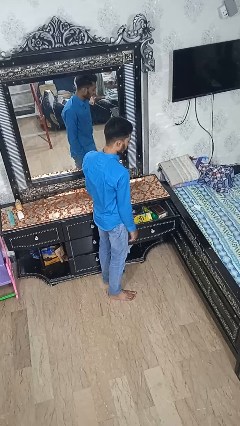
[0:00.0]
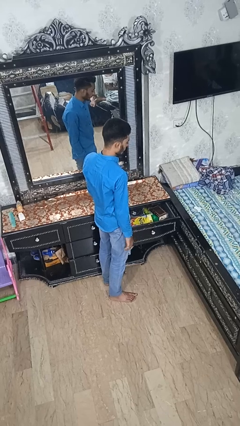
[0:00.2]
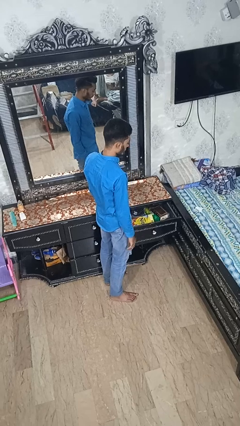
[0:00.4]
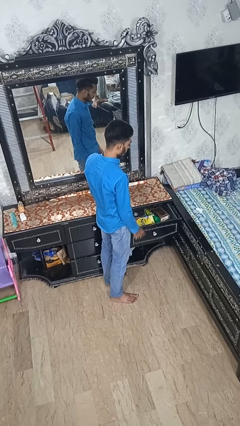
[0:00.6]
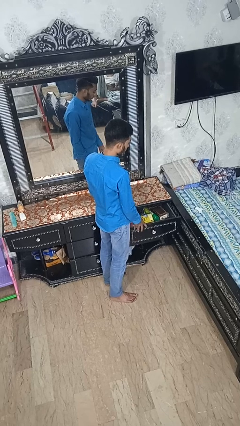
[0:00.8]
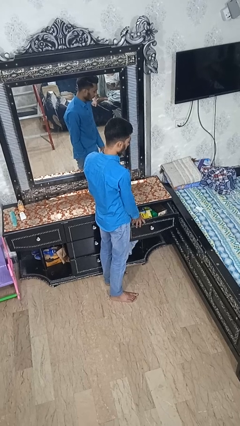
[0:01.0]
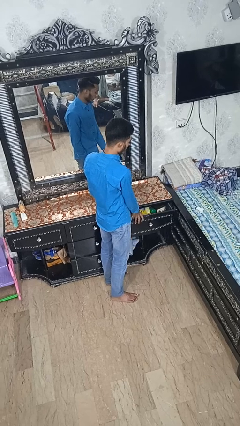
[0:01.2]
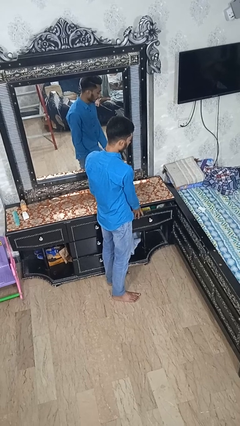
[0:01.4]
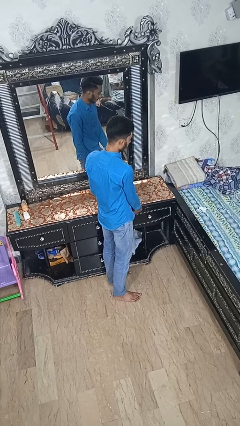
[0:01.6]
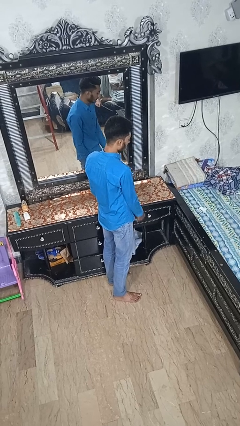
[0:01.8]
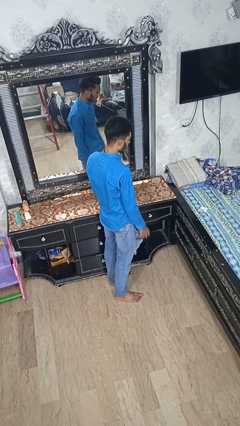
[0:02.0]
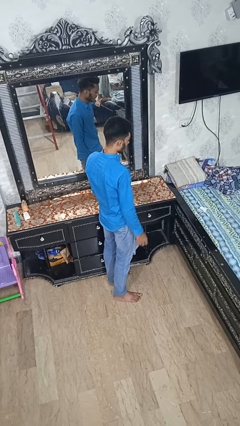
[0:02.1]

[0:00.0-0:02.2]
person closes dresser drawer

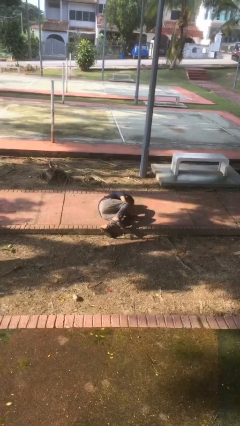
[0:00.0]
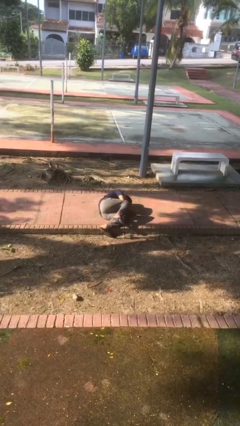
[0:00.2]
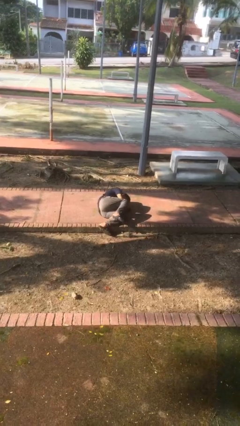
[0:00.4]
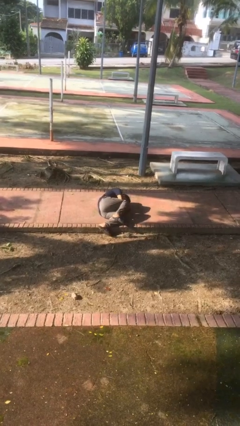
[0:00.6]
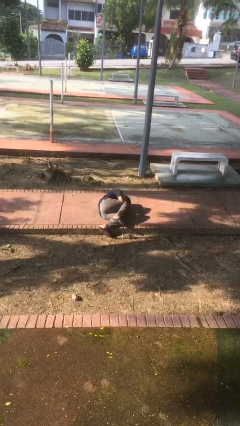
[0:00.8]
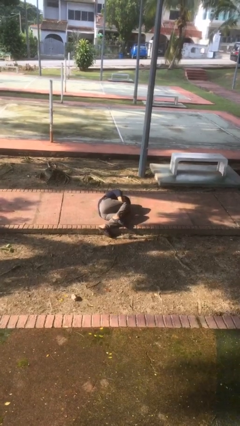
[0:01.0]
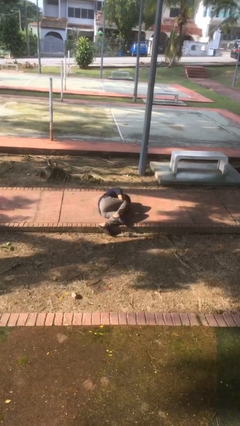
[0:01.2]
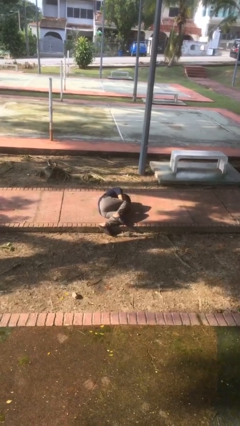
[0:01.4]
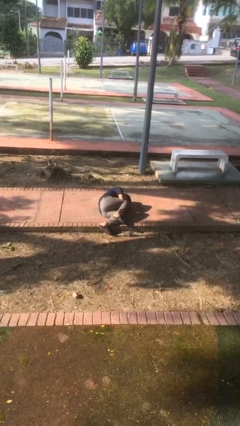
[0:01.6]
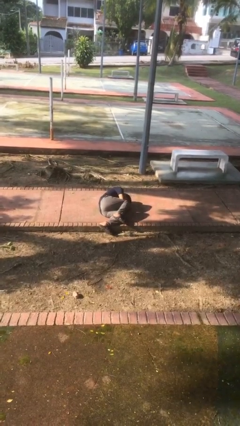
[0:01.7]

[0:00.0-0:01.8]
person lies down on floor

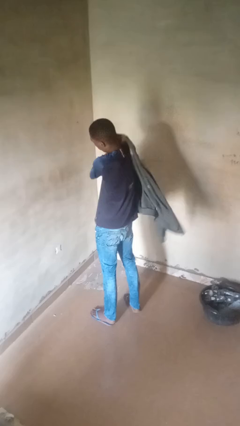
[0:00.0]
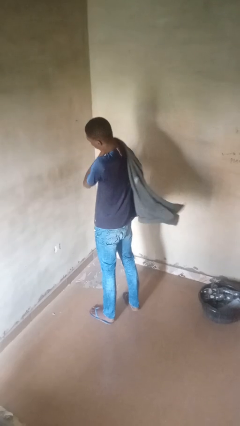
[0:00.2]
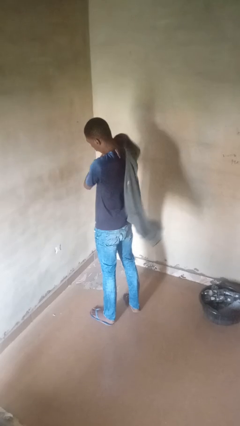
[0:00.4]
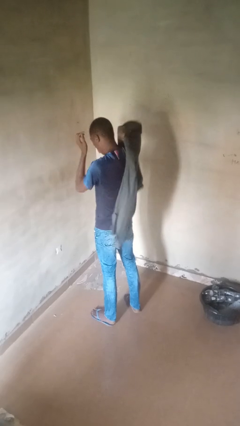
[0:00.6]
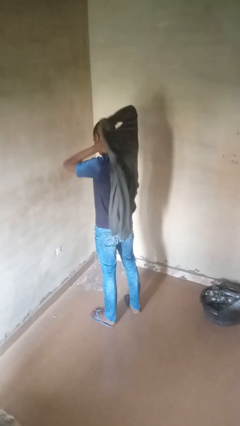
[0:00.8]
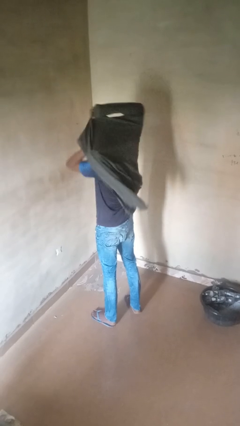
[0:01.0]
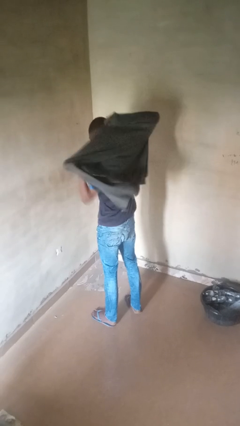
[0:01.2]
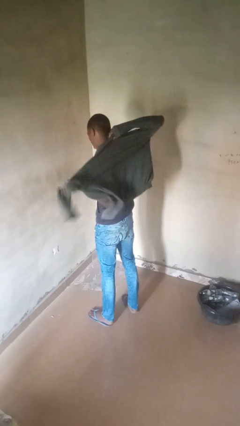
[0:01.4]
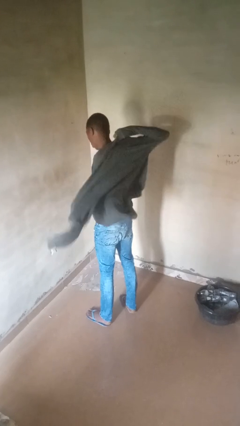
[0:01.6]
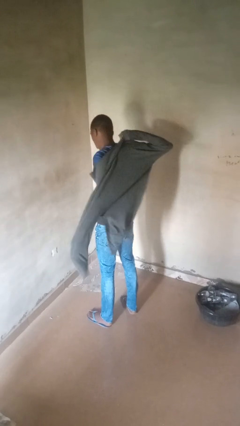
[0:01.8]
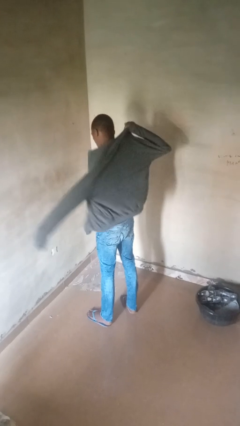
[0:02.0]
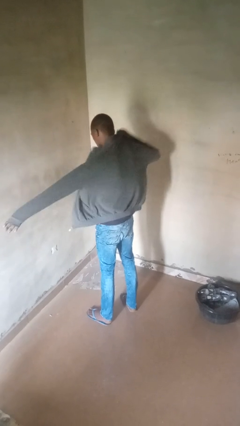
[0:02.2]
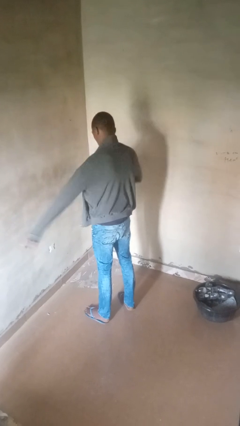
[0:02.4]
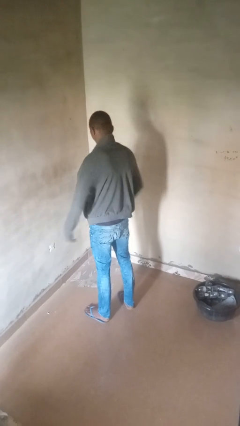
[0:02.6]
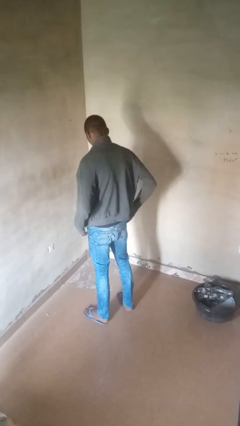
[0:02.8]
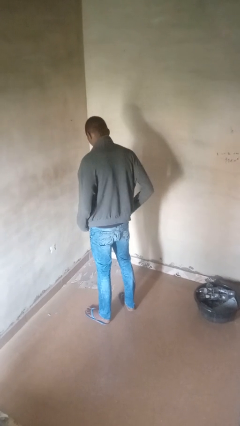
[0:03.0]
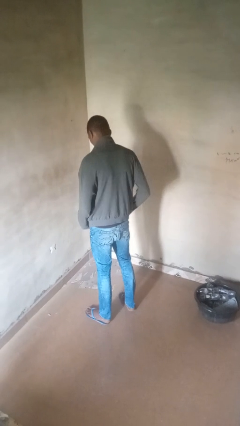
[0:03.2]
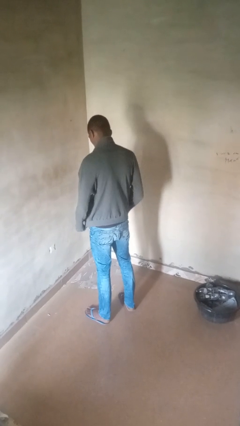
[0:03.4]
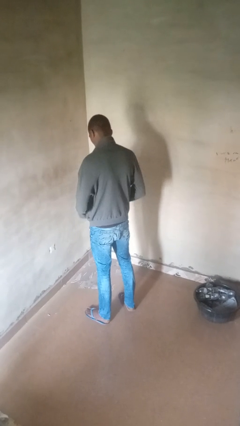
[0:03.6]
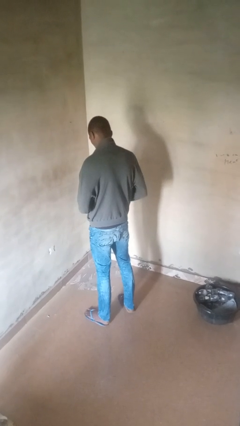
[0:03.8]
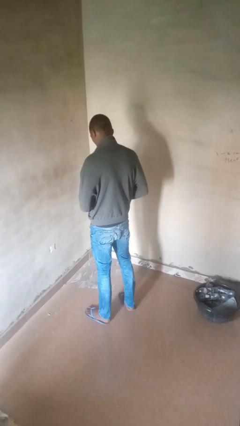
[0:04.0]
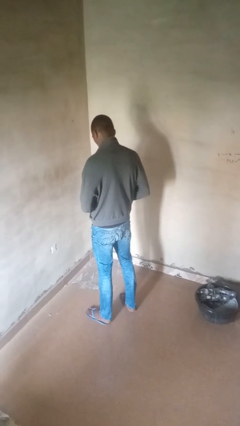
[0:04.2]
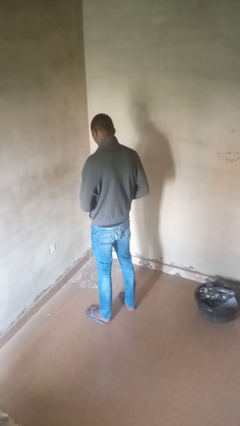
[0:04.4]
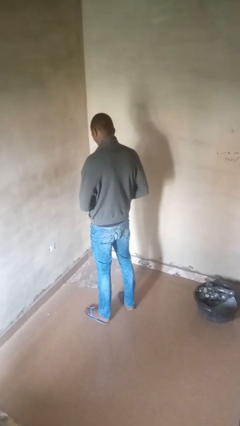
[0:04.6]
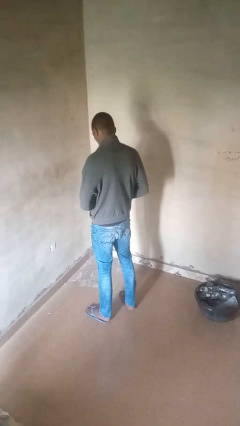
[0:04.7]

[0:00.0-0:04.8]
person puts on jacket

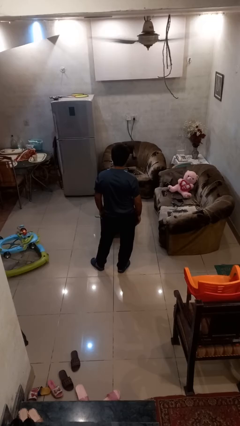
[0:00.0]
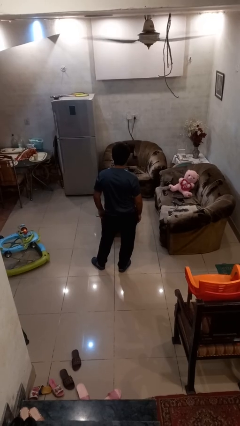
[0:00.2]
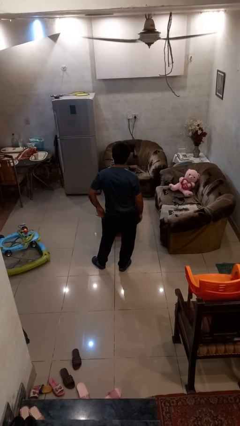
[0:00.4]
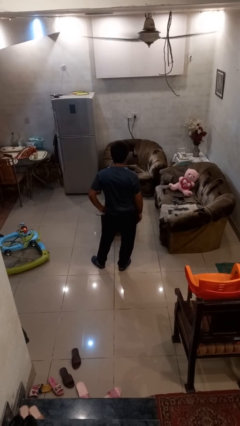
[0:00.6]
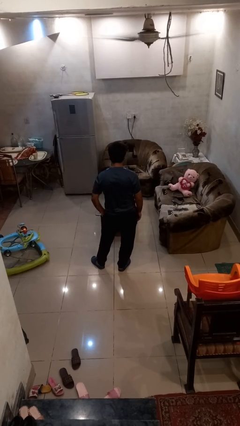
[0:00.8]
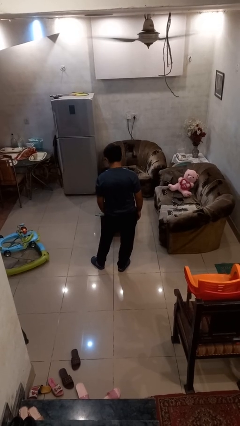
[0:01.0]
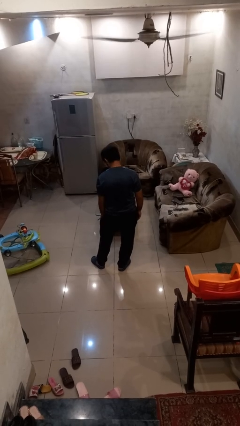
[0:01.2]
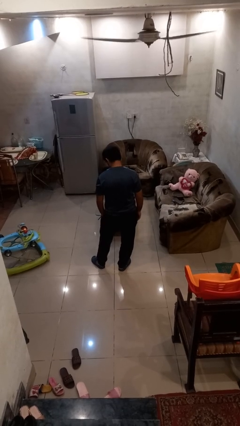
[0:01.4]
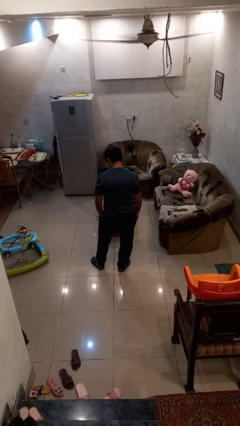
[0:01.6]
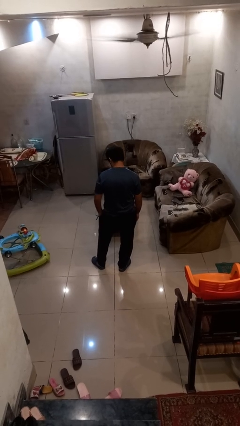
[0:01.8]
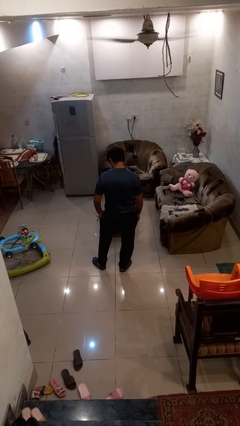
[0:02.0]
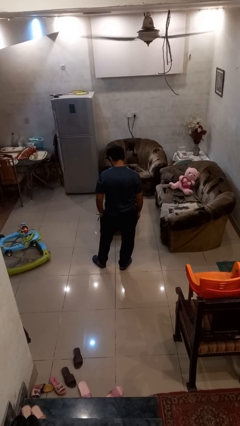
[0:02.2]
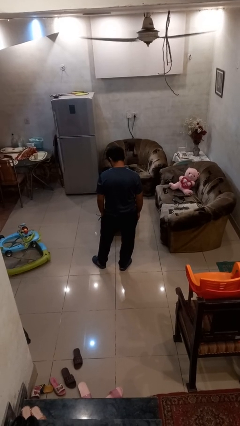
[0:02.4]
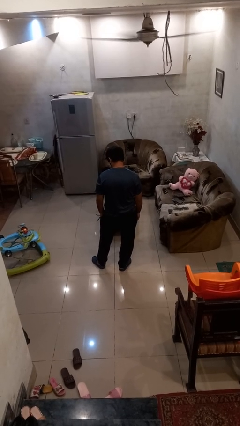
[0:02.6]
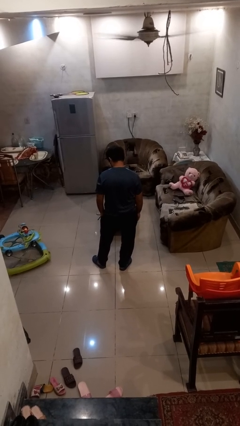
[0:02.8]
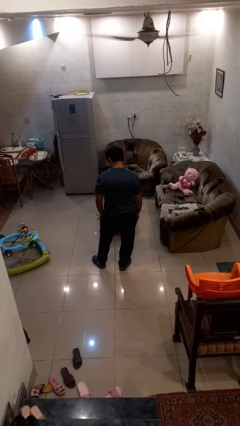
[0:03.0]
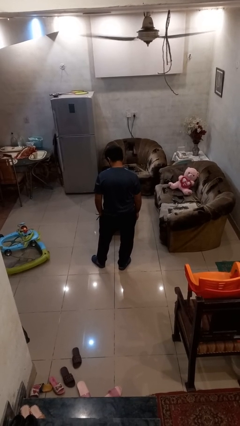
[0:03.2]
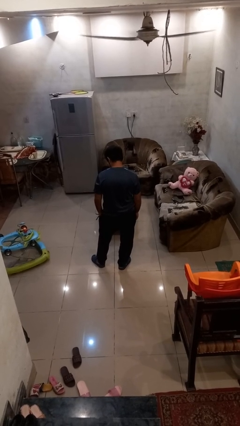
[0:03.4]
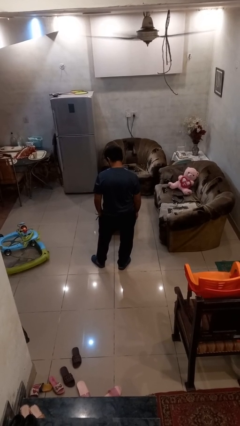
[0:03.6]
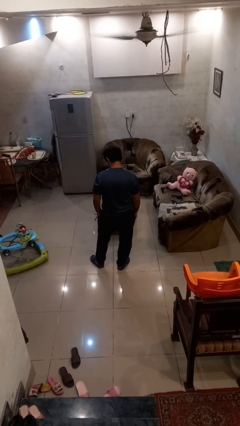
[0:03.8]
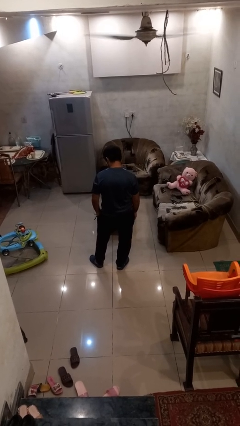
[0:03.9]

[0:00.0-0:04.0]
person puts hands in back pockets

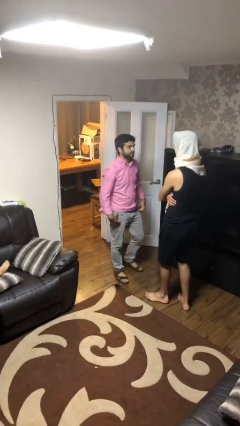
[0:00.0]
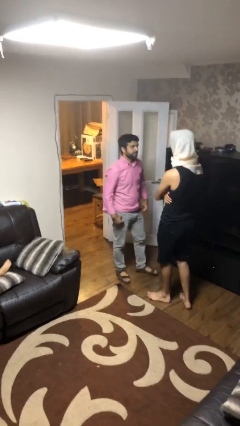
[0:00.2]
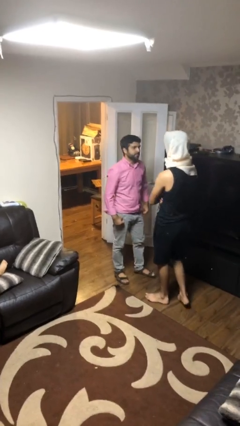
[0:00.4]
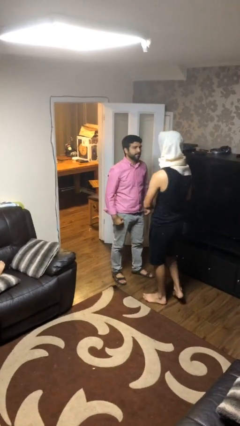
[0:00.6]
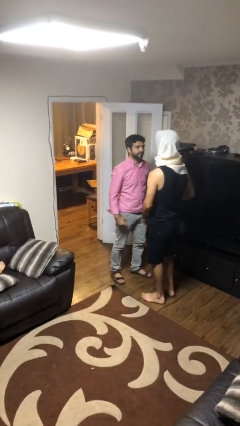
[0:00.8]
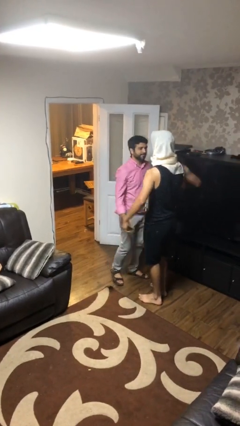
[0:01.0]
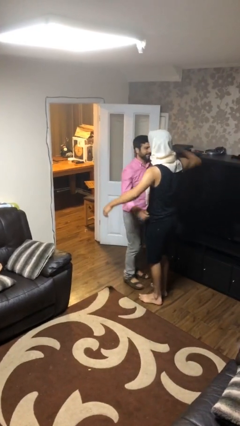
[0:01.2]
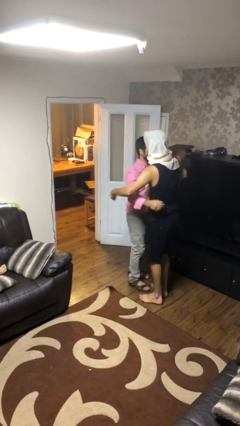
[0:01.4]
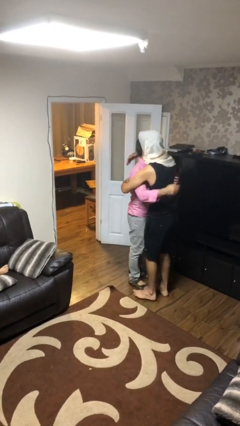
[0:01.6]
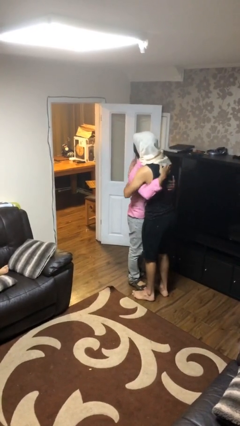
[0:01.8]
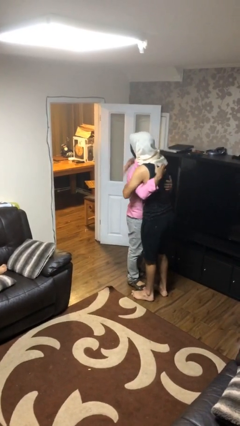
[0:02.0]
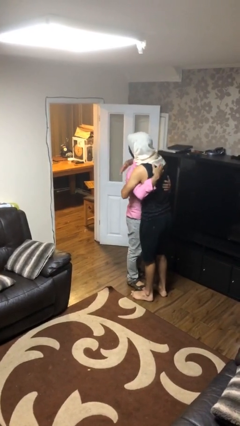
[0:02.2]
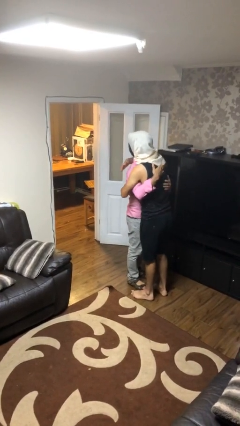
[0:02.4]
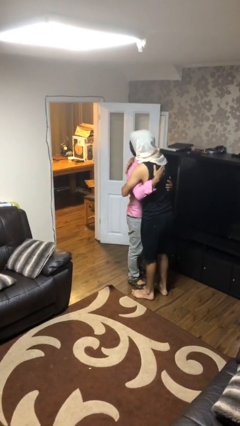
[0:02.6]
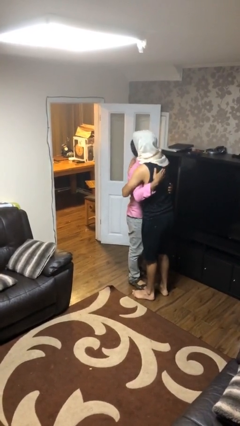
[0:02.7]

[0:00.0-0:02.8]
person embraces person

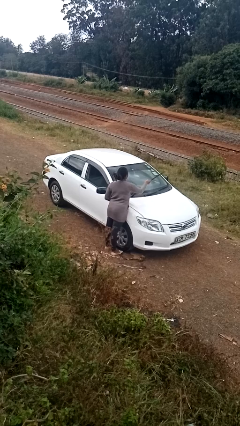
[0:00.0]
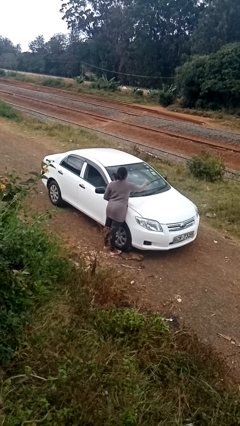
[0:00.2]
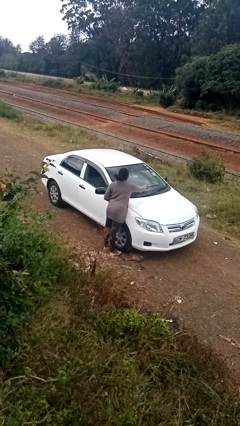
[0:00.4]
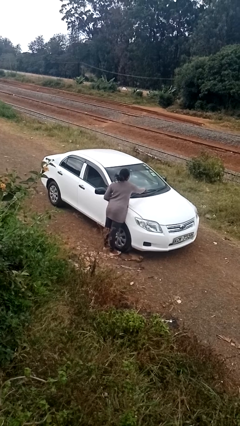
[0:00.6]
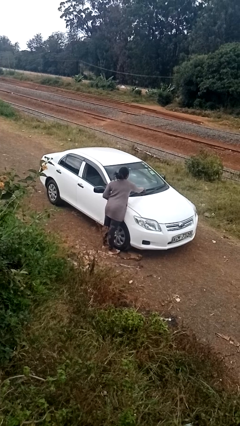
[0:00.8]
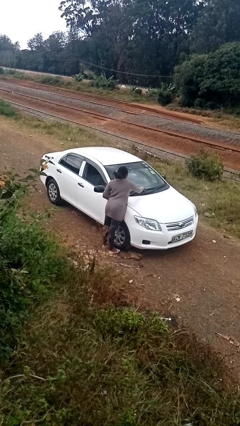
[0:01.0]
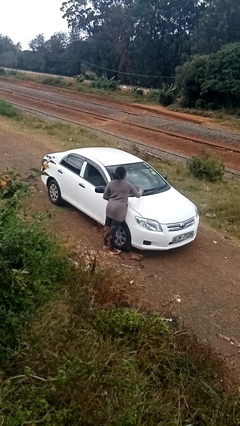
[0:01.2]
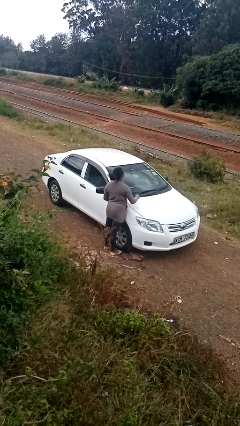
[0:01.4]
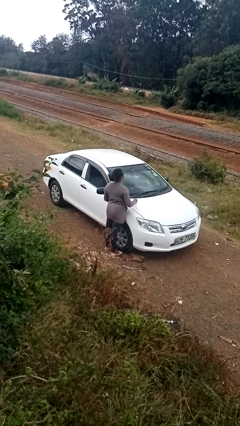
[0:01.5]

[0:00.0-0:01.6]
person flips down car wipers
